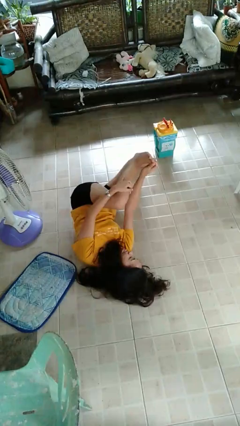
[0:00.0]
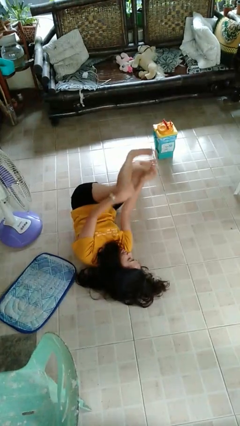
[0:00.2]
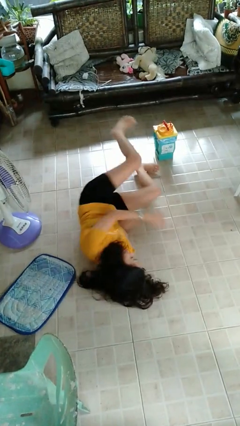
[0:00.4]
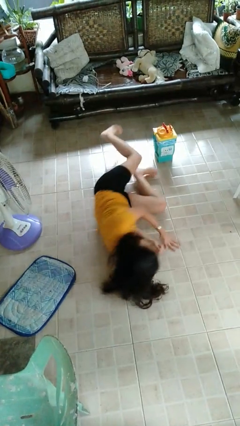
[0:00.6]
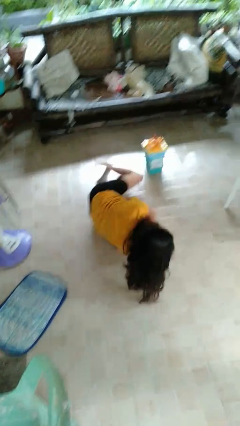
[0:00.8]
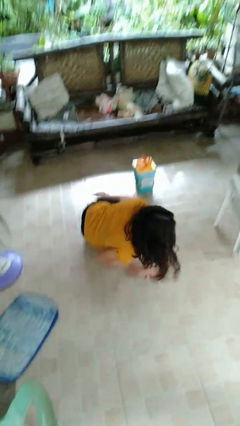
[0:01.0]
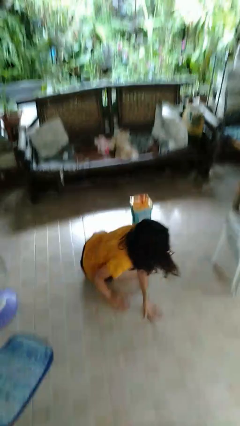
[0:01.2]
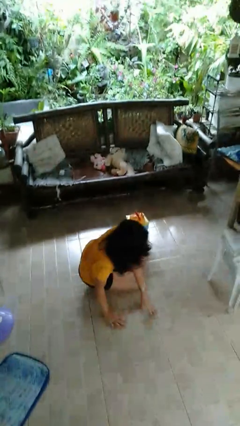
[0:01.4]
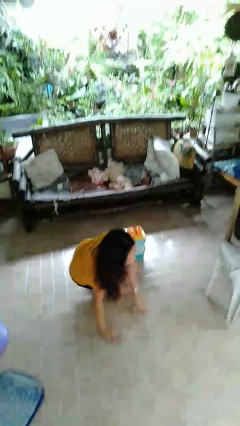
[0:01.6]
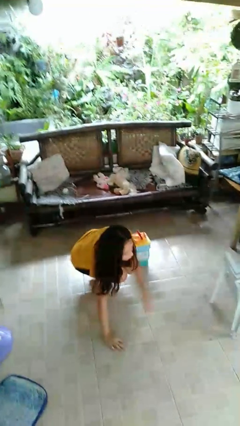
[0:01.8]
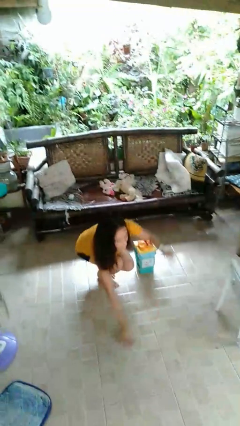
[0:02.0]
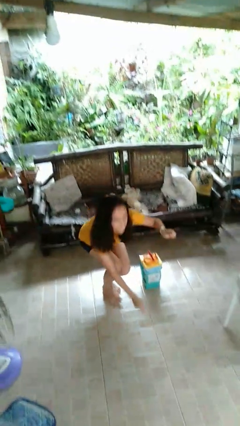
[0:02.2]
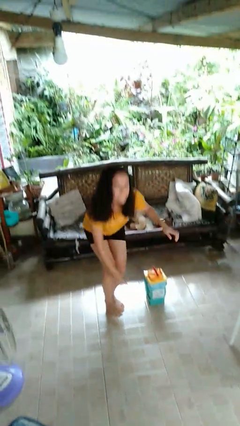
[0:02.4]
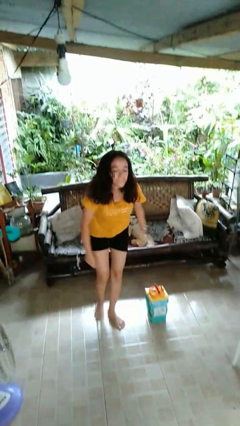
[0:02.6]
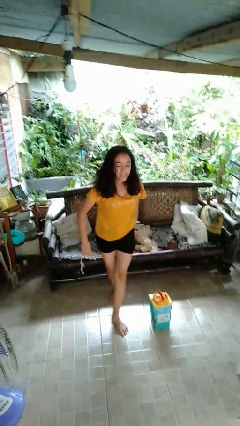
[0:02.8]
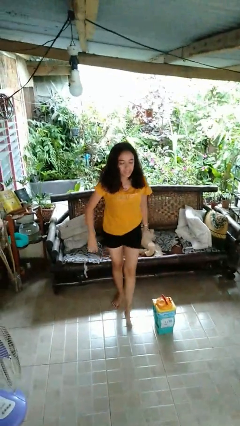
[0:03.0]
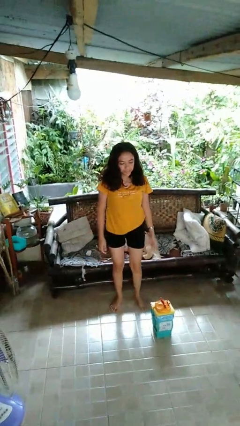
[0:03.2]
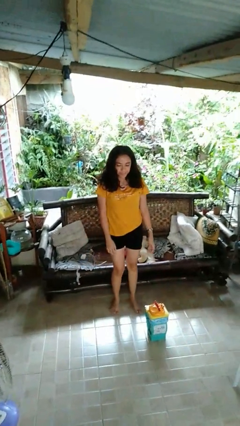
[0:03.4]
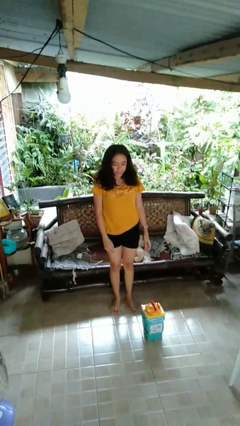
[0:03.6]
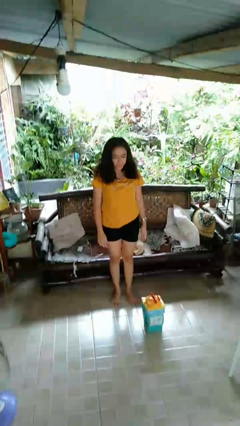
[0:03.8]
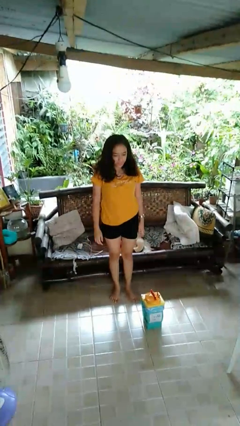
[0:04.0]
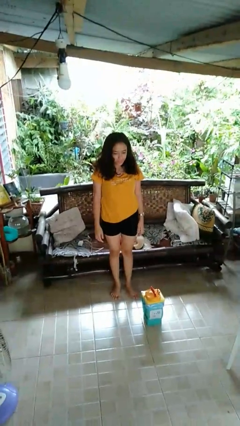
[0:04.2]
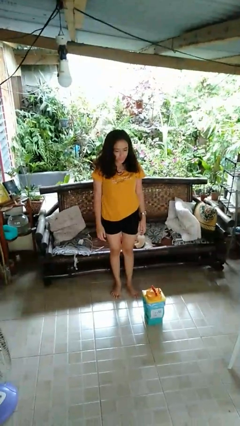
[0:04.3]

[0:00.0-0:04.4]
person stands up from floor

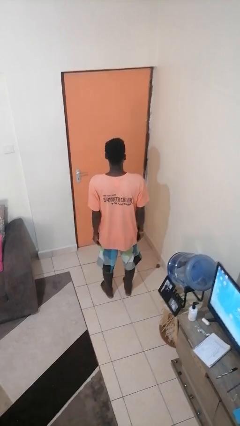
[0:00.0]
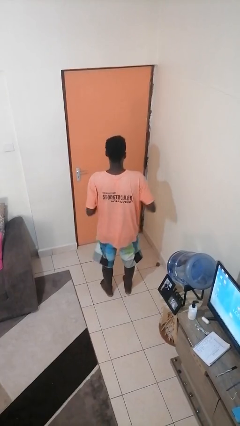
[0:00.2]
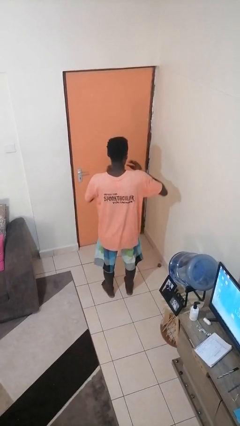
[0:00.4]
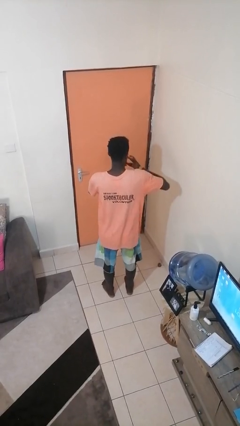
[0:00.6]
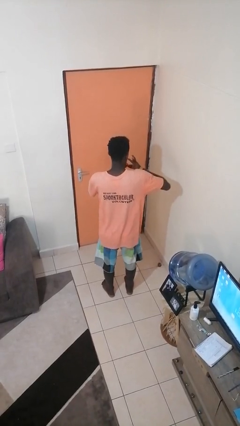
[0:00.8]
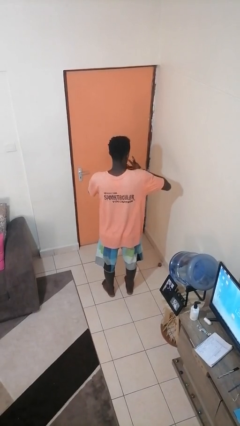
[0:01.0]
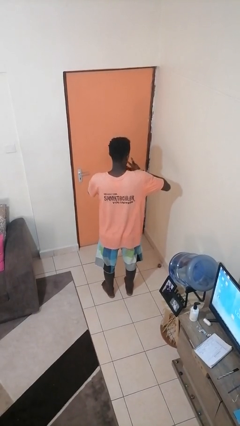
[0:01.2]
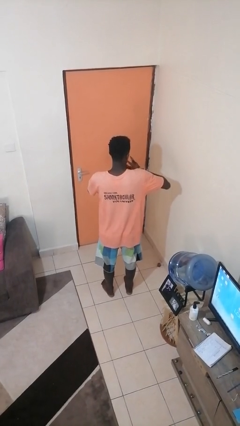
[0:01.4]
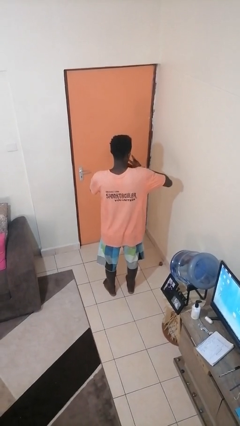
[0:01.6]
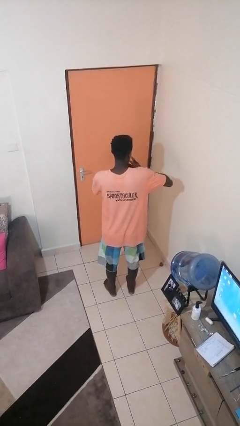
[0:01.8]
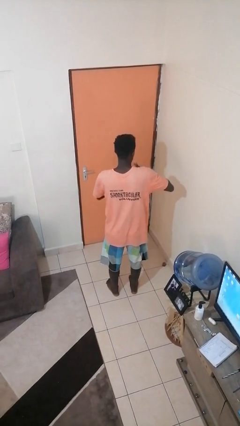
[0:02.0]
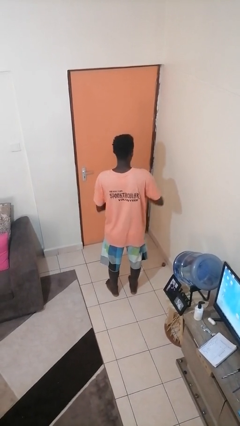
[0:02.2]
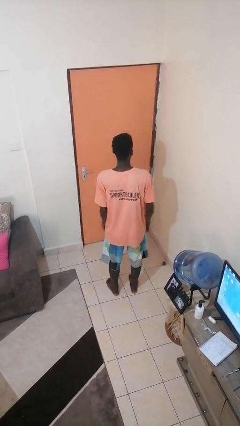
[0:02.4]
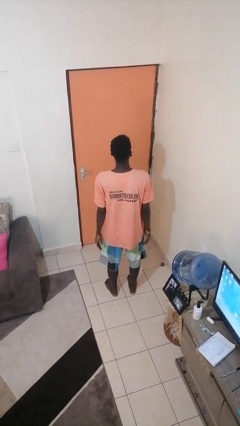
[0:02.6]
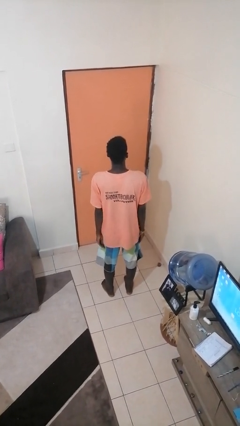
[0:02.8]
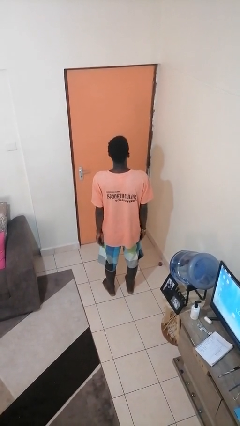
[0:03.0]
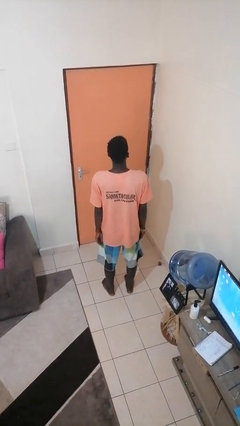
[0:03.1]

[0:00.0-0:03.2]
person puts on ring

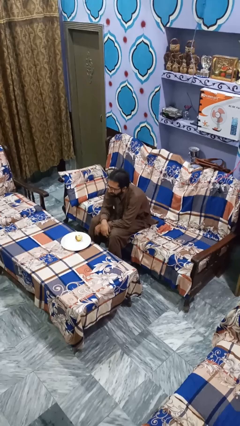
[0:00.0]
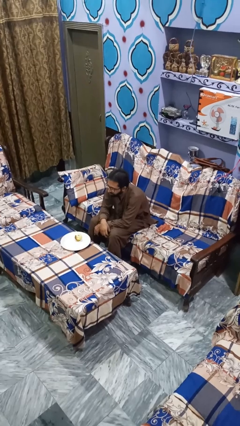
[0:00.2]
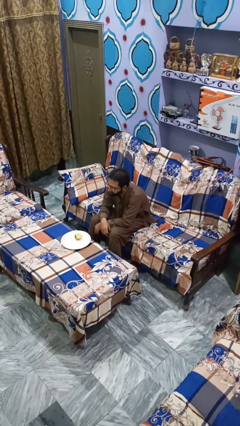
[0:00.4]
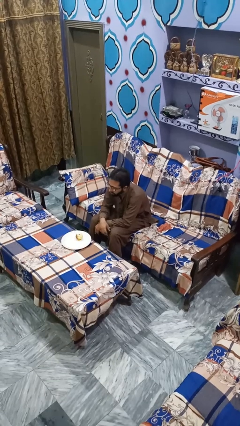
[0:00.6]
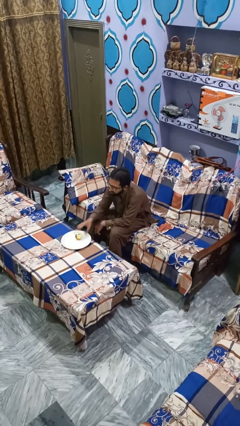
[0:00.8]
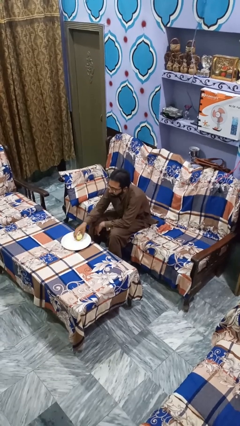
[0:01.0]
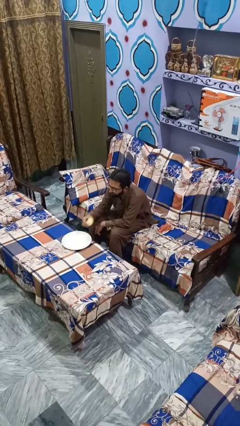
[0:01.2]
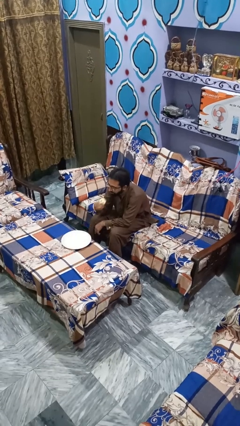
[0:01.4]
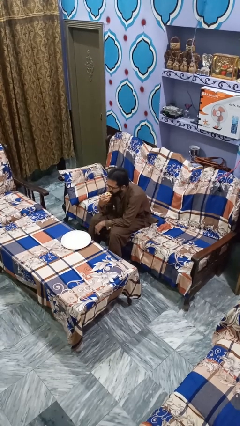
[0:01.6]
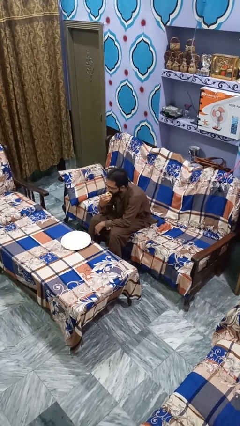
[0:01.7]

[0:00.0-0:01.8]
person eats apple

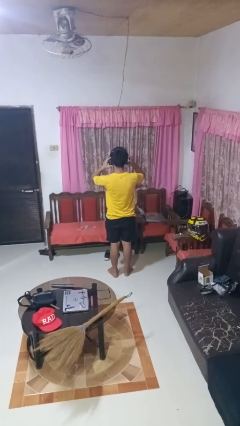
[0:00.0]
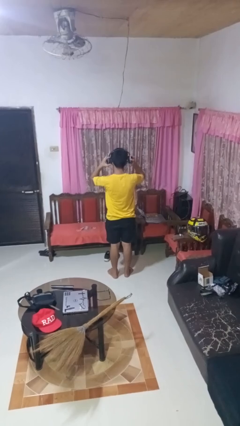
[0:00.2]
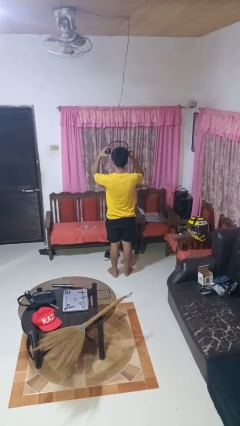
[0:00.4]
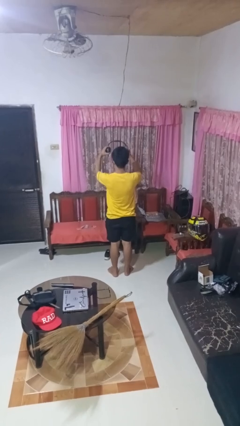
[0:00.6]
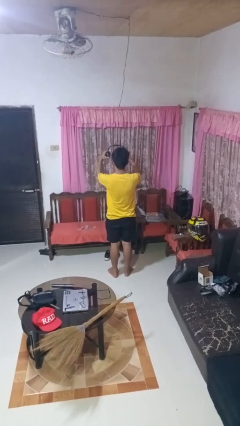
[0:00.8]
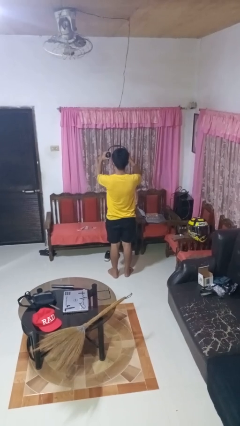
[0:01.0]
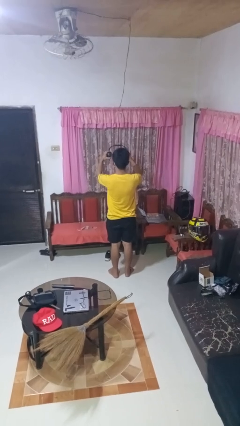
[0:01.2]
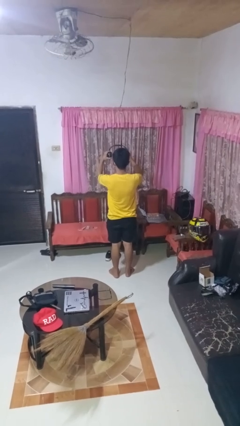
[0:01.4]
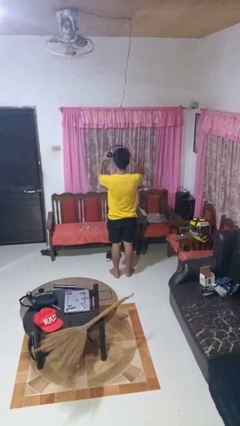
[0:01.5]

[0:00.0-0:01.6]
person takes off headphones

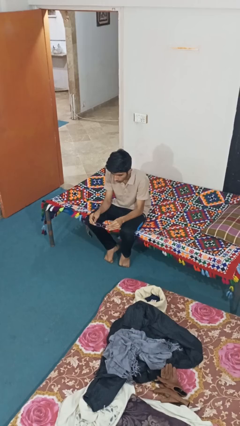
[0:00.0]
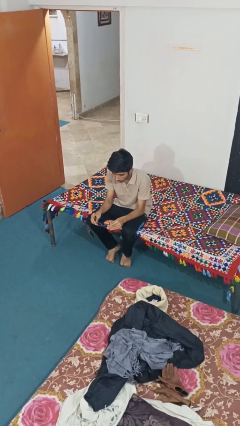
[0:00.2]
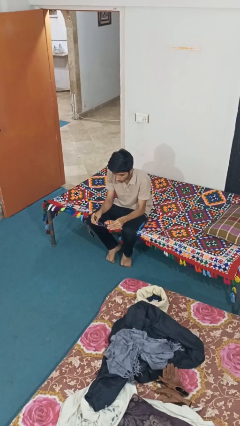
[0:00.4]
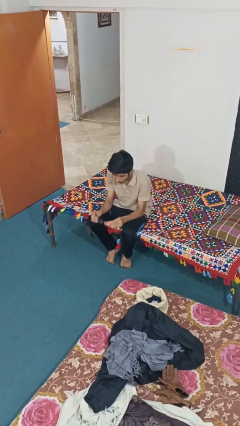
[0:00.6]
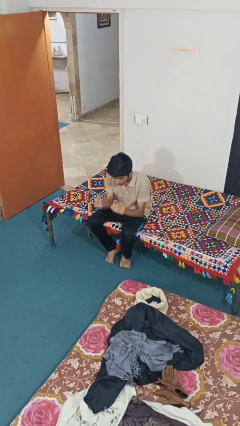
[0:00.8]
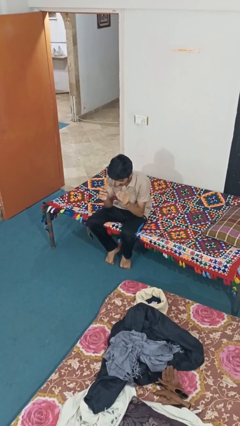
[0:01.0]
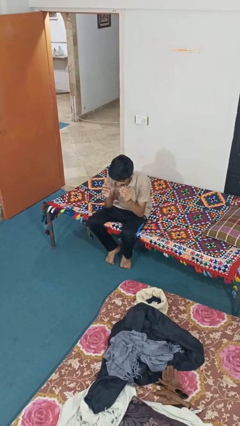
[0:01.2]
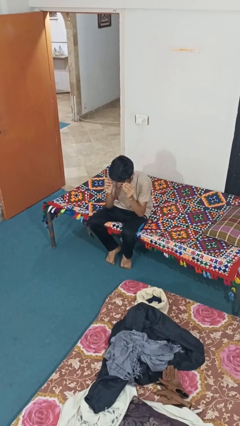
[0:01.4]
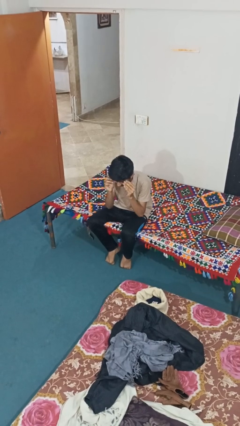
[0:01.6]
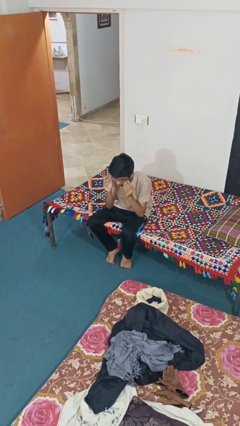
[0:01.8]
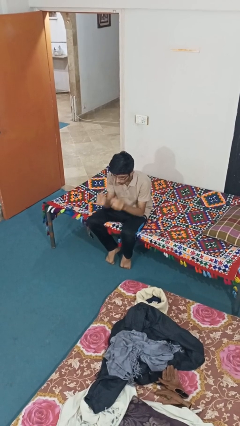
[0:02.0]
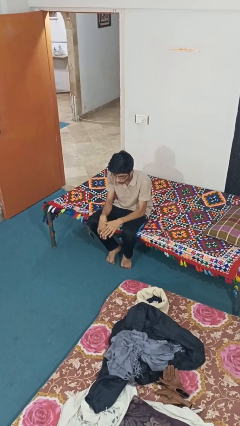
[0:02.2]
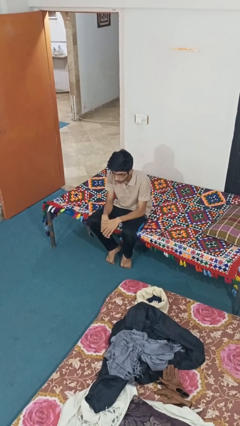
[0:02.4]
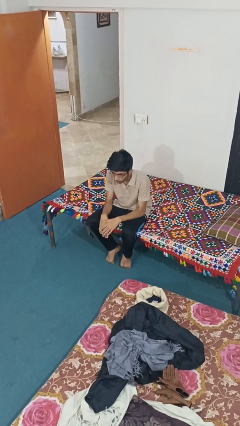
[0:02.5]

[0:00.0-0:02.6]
person puts on glasses

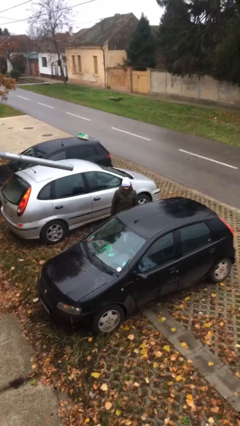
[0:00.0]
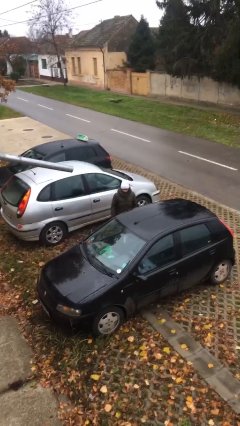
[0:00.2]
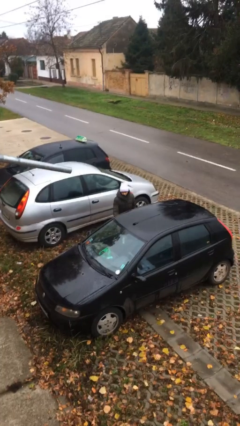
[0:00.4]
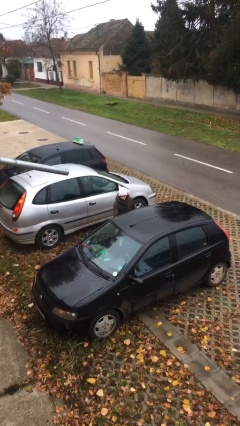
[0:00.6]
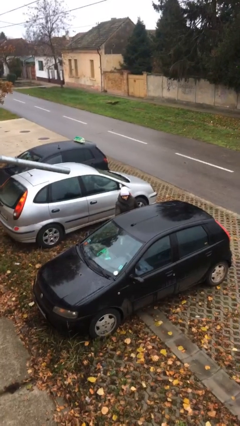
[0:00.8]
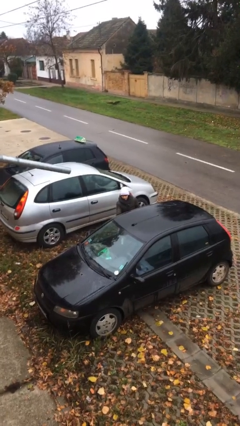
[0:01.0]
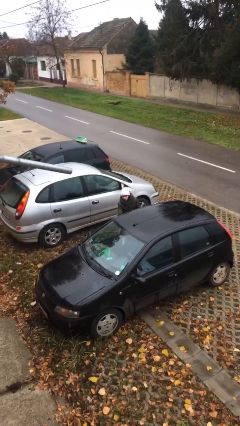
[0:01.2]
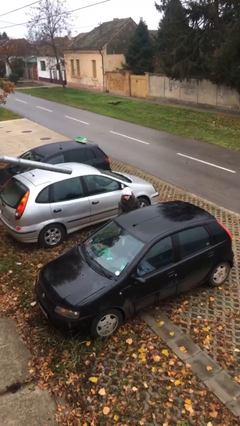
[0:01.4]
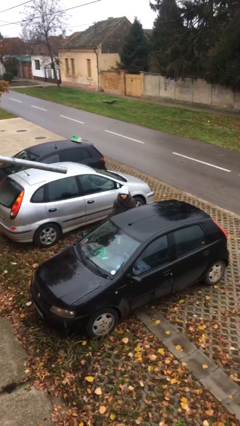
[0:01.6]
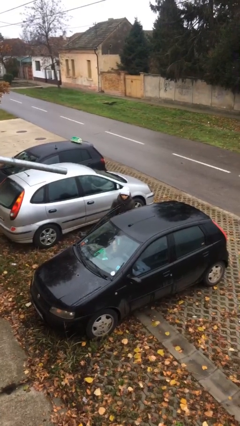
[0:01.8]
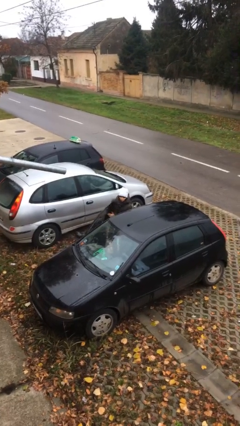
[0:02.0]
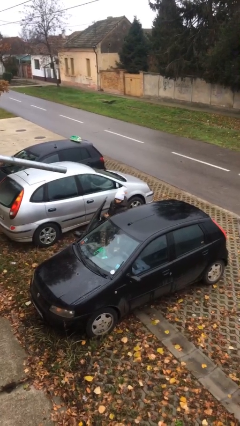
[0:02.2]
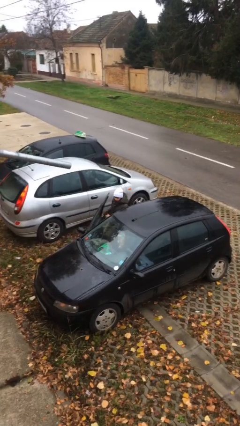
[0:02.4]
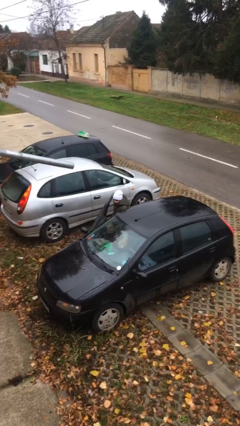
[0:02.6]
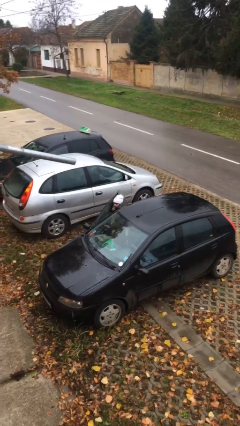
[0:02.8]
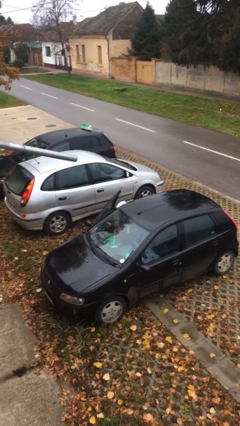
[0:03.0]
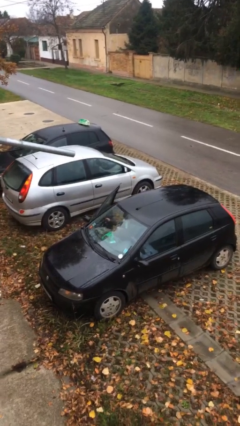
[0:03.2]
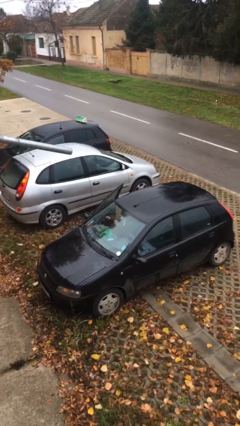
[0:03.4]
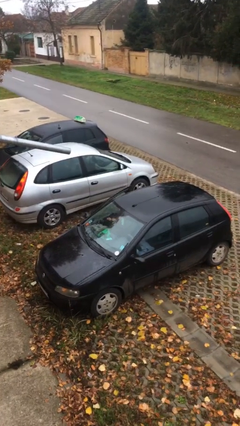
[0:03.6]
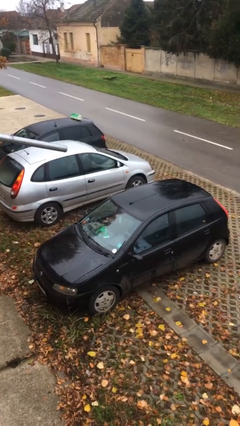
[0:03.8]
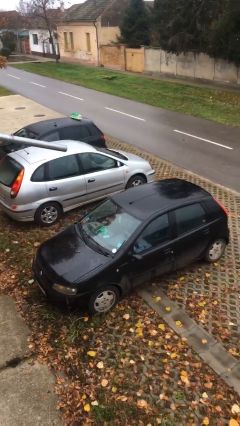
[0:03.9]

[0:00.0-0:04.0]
person enters car
